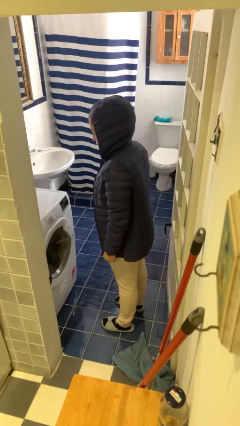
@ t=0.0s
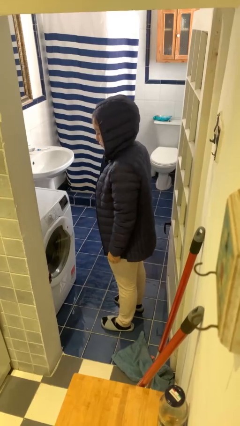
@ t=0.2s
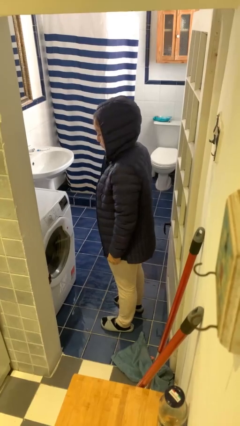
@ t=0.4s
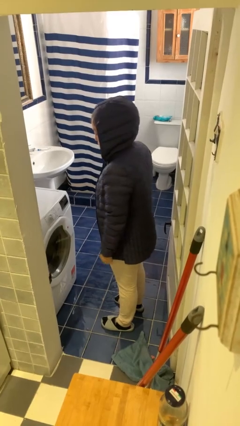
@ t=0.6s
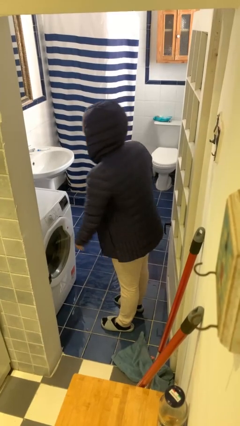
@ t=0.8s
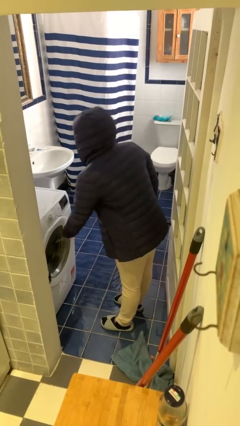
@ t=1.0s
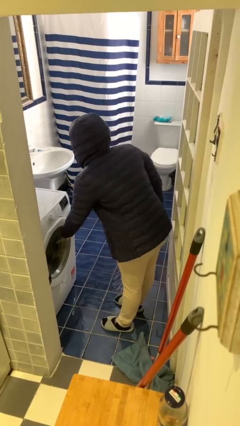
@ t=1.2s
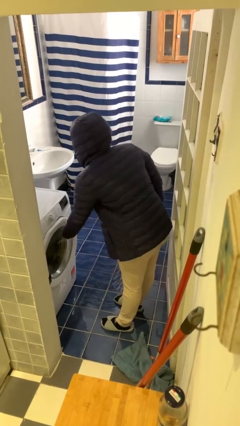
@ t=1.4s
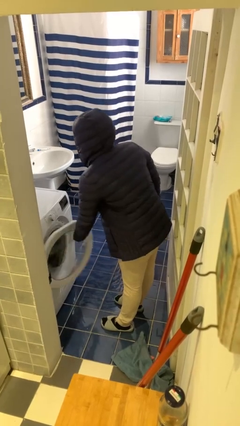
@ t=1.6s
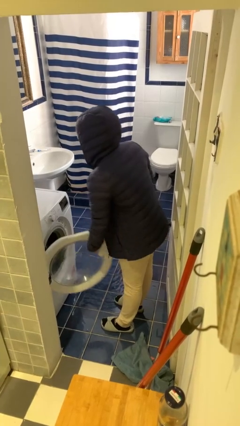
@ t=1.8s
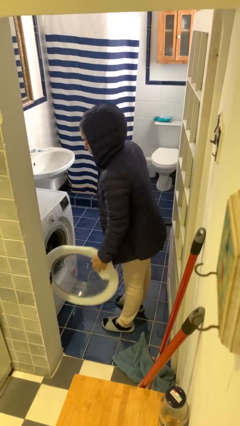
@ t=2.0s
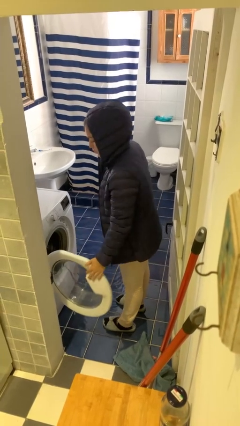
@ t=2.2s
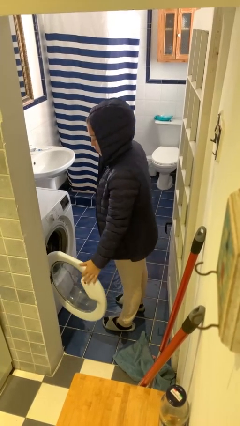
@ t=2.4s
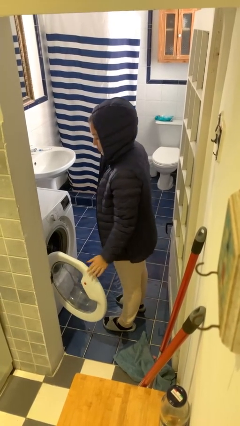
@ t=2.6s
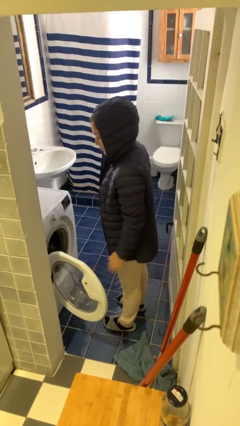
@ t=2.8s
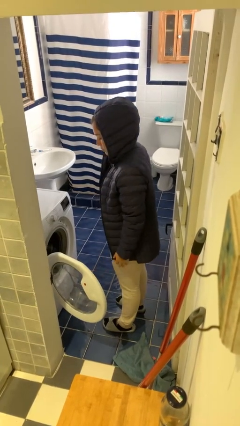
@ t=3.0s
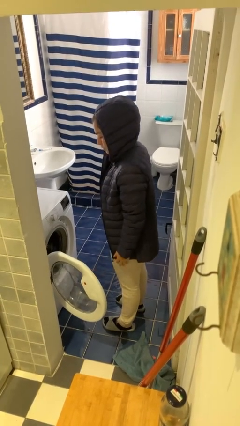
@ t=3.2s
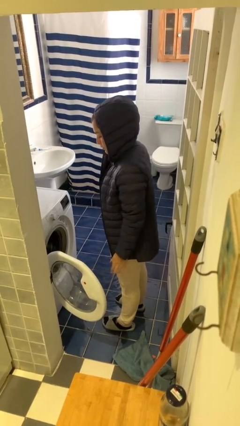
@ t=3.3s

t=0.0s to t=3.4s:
person opens clothes washer

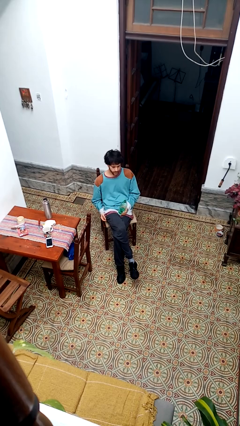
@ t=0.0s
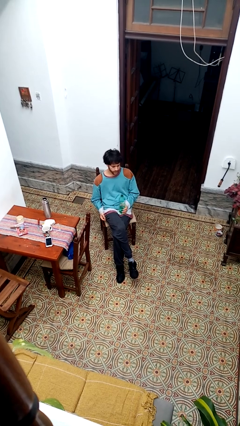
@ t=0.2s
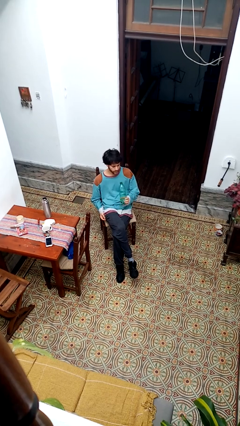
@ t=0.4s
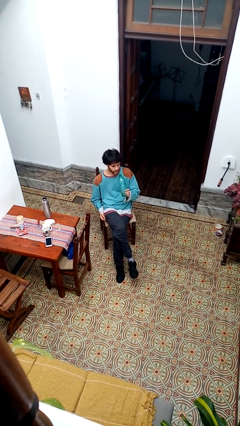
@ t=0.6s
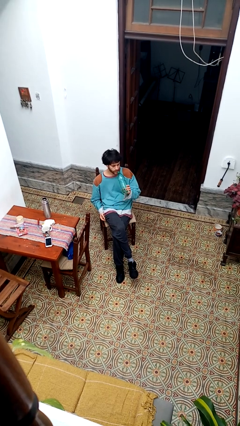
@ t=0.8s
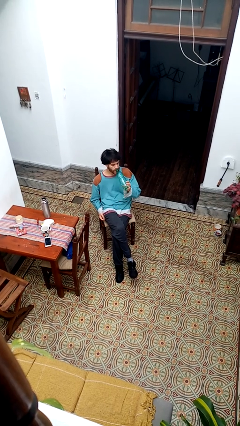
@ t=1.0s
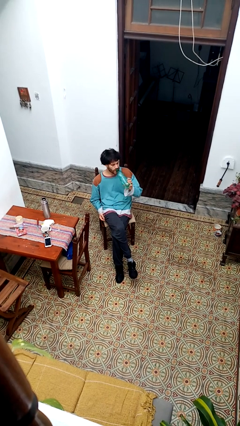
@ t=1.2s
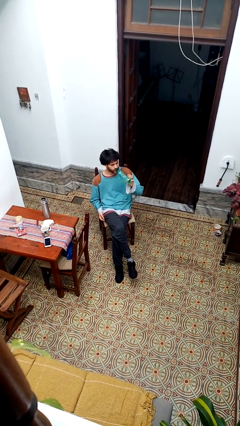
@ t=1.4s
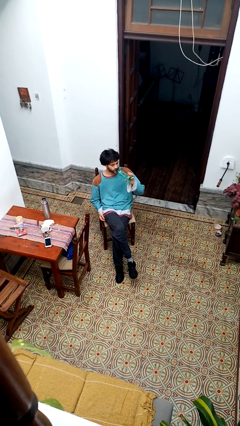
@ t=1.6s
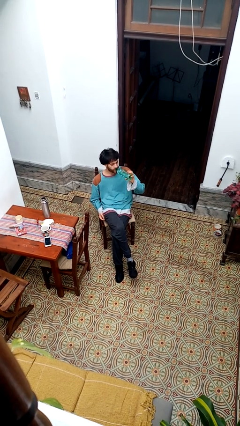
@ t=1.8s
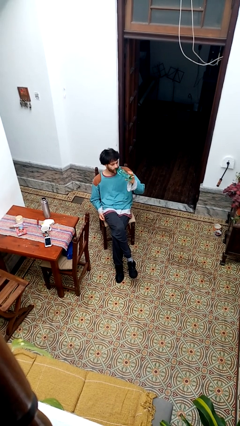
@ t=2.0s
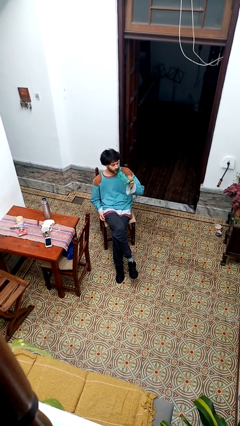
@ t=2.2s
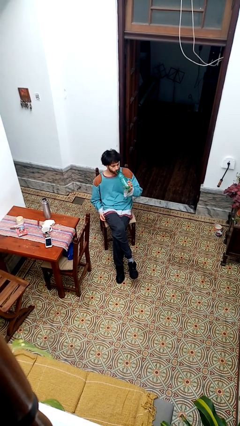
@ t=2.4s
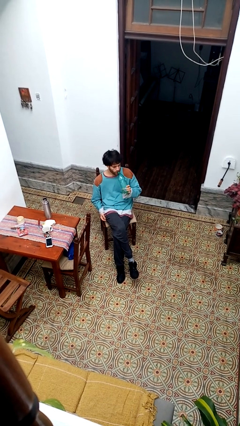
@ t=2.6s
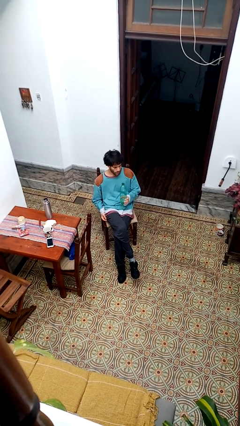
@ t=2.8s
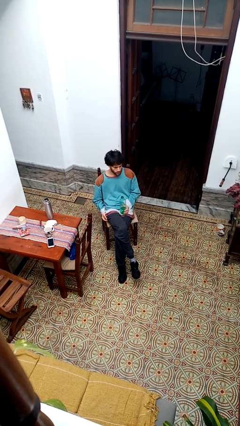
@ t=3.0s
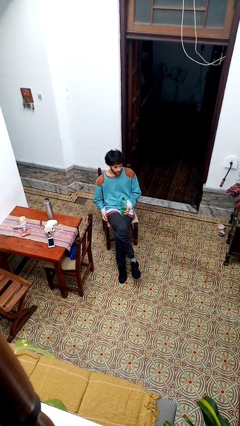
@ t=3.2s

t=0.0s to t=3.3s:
person drinks from bottle

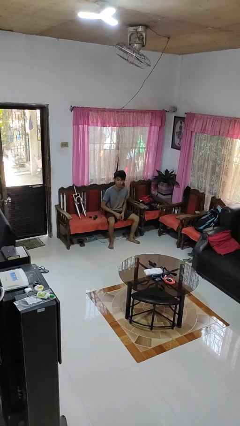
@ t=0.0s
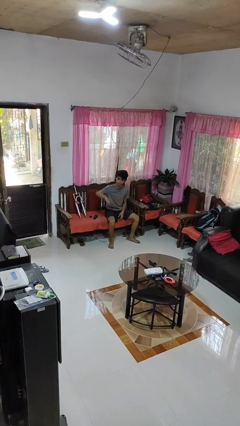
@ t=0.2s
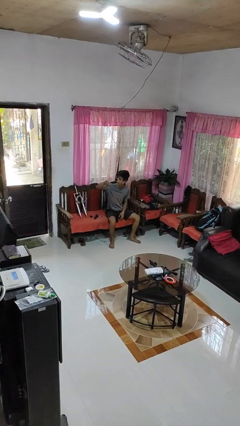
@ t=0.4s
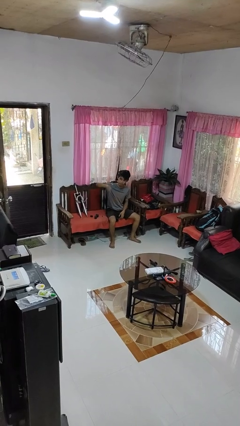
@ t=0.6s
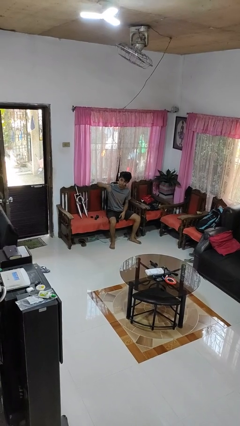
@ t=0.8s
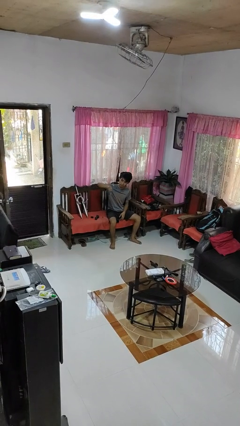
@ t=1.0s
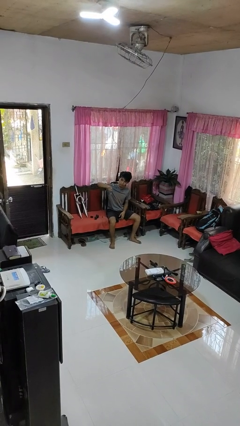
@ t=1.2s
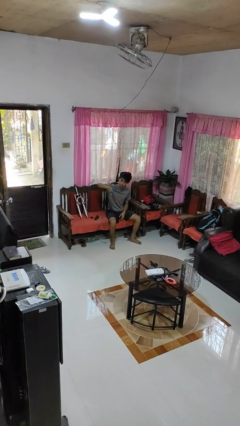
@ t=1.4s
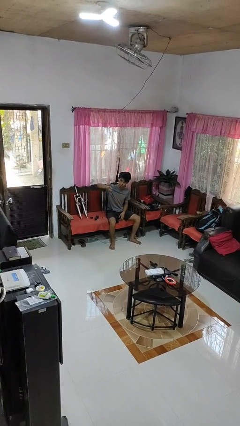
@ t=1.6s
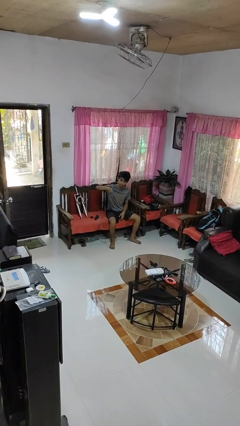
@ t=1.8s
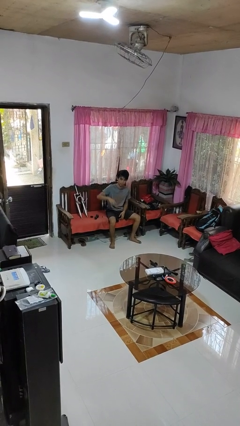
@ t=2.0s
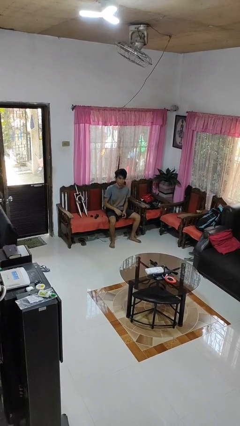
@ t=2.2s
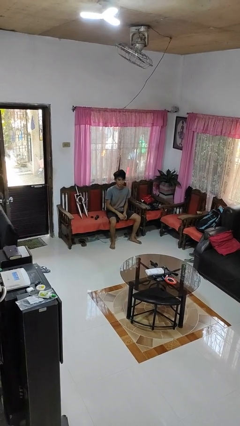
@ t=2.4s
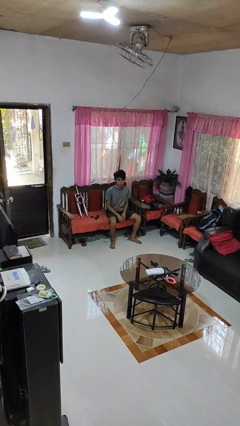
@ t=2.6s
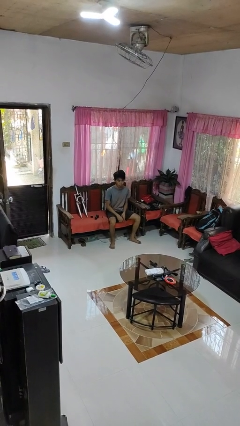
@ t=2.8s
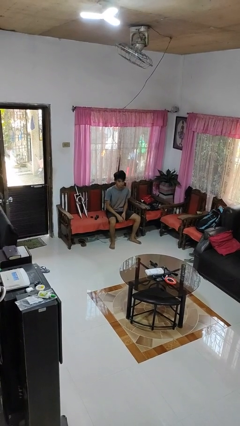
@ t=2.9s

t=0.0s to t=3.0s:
person gestures thumbs down

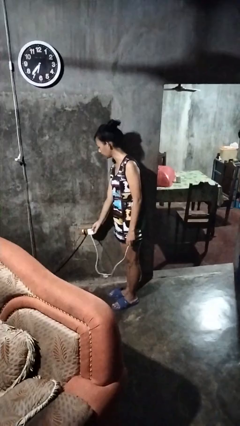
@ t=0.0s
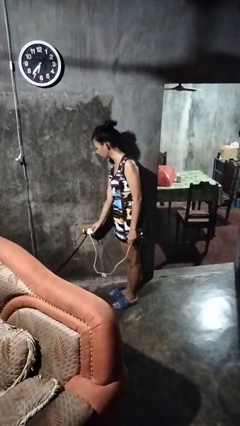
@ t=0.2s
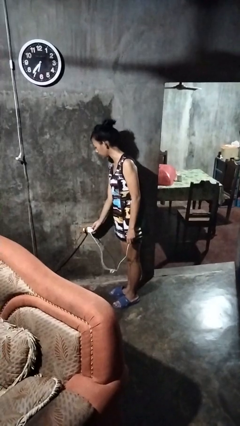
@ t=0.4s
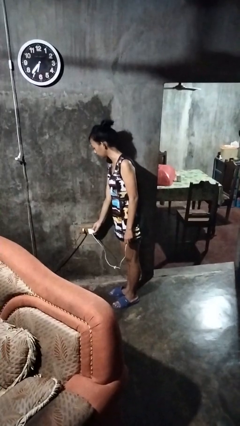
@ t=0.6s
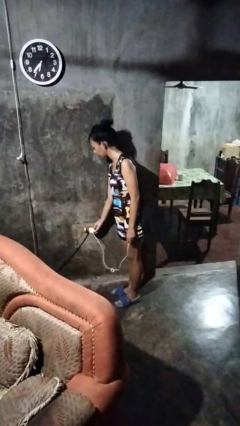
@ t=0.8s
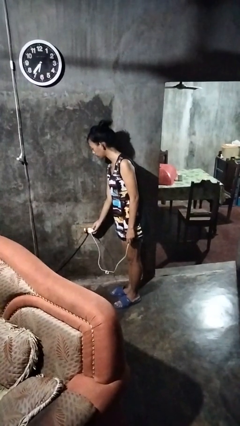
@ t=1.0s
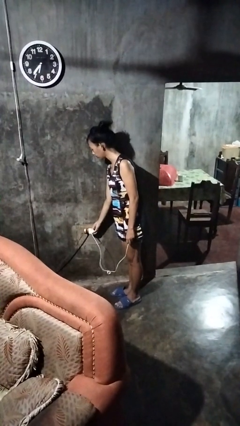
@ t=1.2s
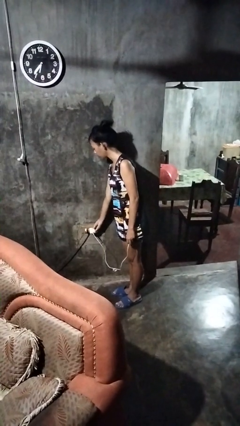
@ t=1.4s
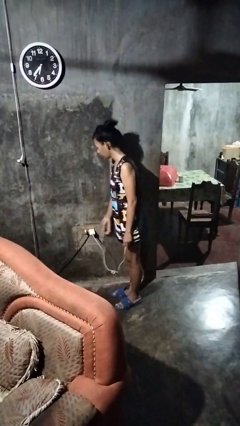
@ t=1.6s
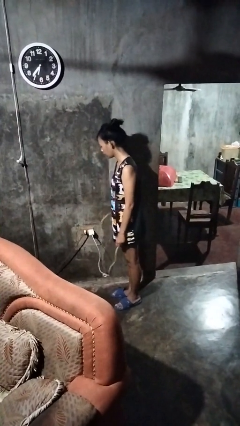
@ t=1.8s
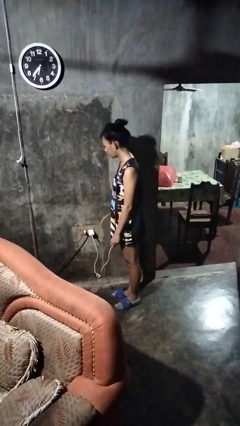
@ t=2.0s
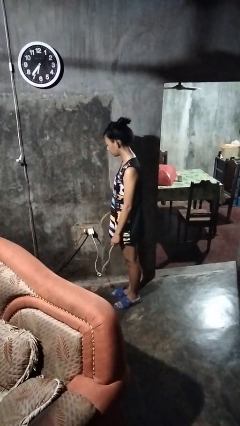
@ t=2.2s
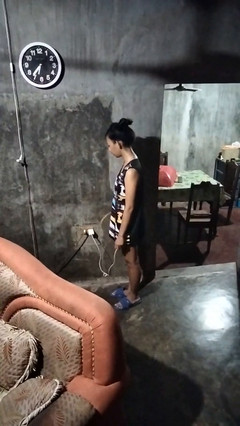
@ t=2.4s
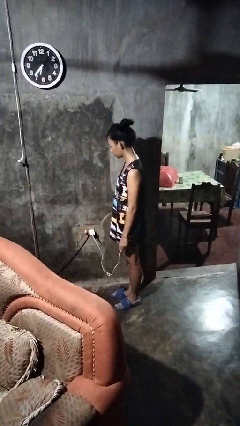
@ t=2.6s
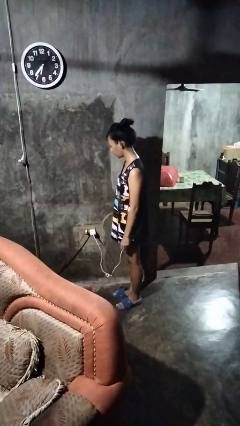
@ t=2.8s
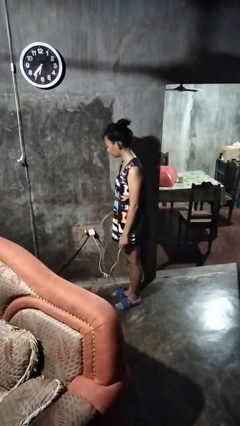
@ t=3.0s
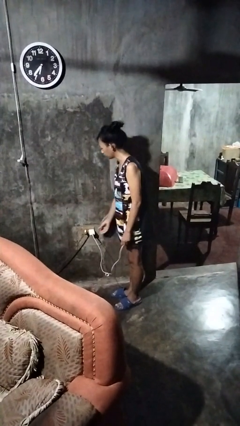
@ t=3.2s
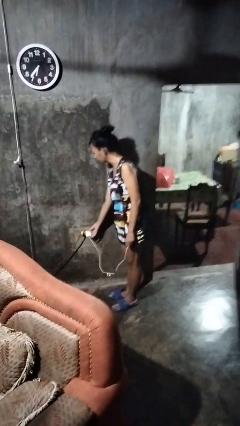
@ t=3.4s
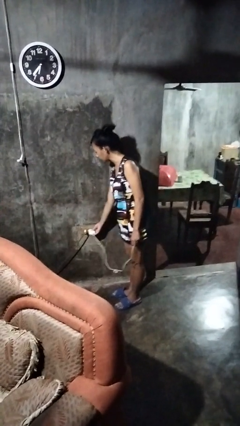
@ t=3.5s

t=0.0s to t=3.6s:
person plugs into electrical socket

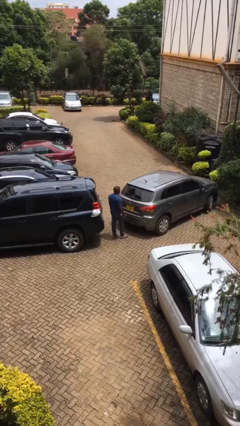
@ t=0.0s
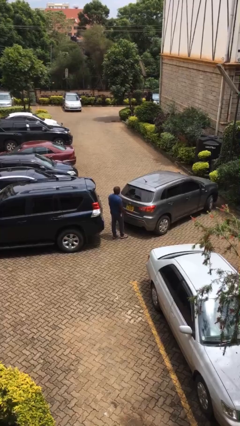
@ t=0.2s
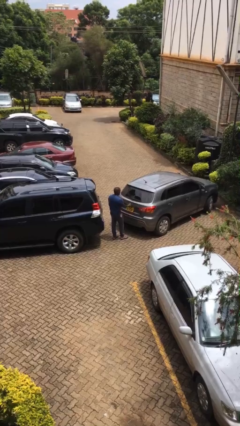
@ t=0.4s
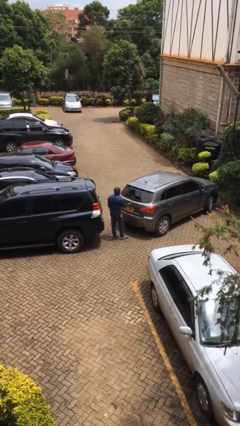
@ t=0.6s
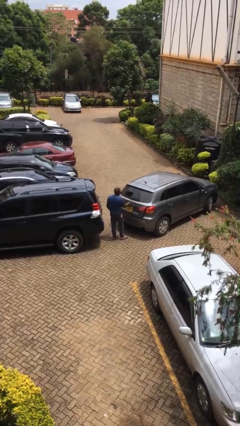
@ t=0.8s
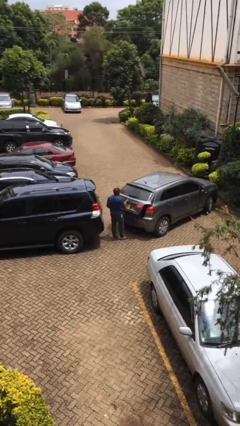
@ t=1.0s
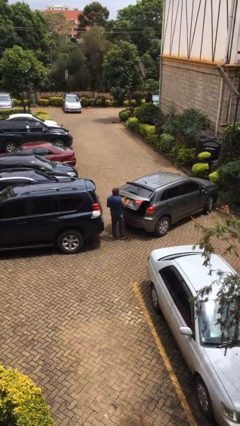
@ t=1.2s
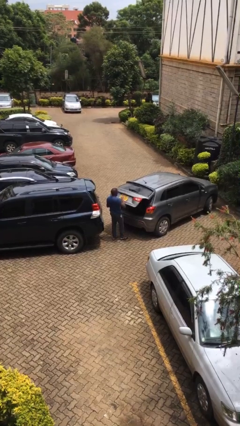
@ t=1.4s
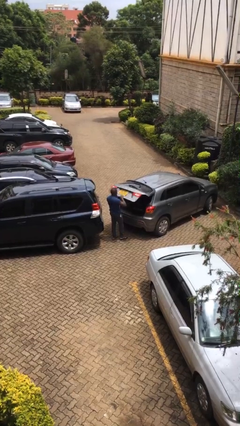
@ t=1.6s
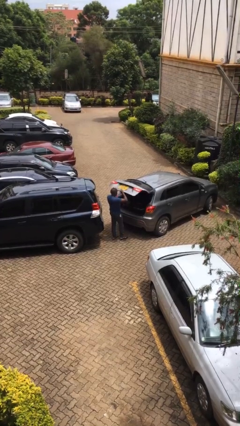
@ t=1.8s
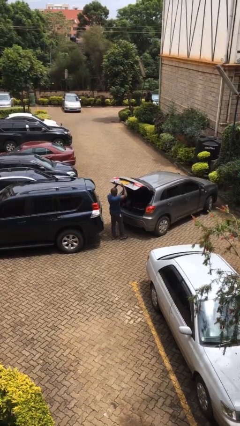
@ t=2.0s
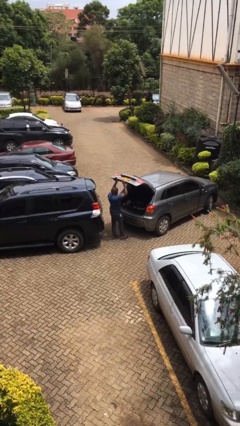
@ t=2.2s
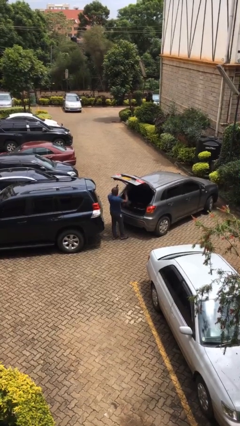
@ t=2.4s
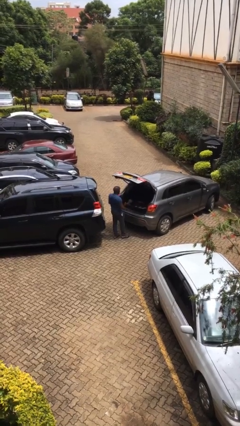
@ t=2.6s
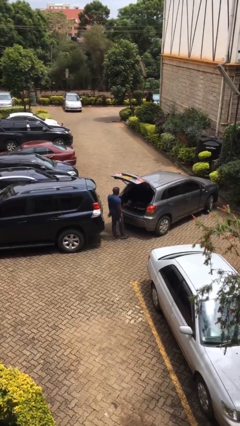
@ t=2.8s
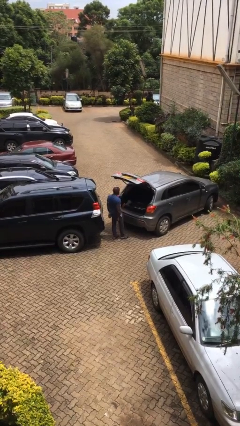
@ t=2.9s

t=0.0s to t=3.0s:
person opens car trunk

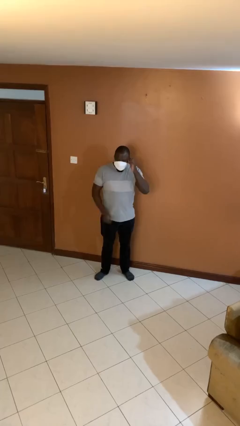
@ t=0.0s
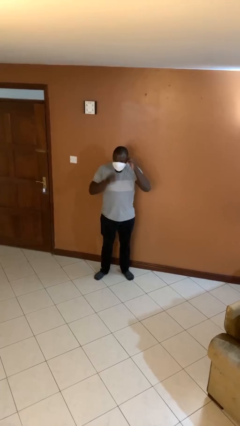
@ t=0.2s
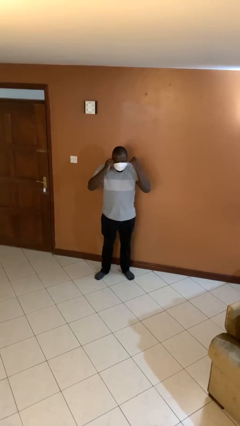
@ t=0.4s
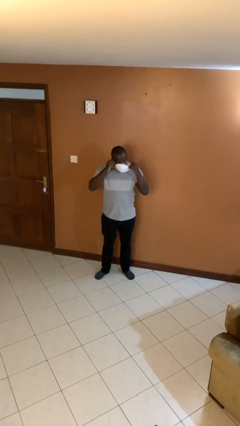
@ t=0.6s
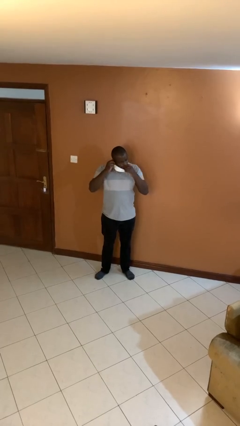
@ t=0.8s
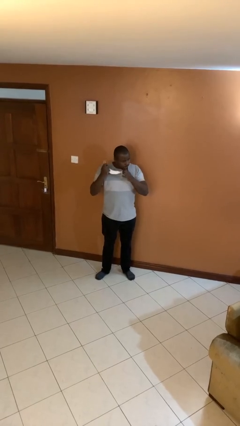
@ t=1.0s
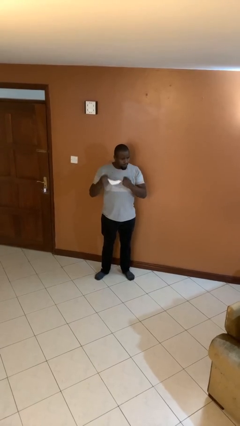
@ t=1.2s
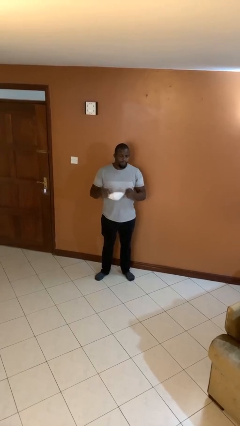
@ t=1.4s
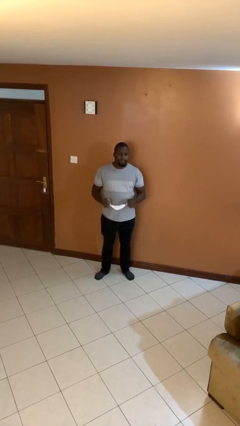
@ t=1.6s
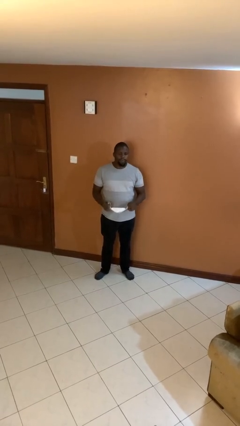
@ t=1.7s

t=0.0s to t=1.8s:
person takes off facemask
